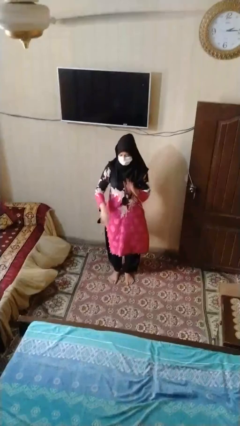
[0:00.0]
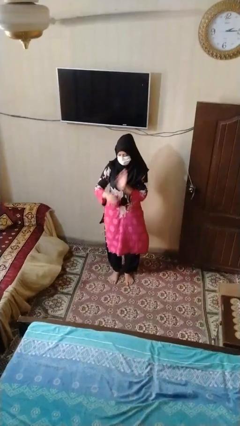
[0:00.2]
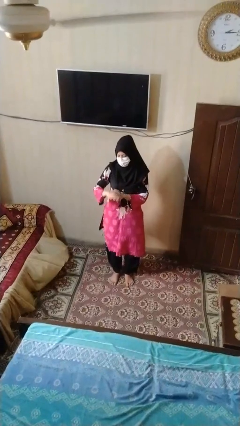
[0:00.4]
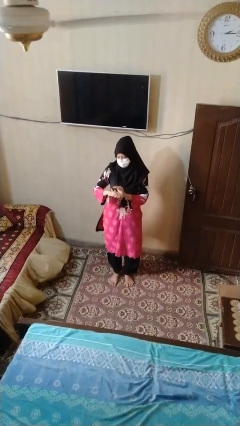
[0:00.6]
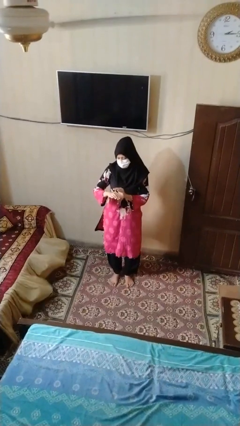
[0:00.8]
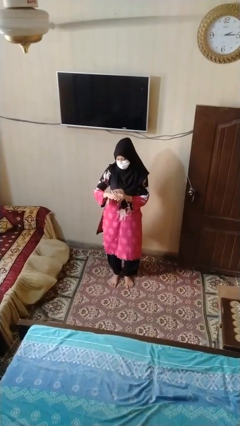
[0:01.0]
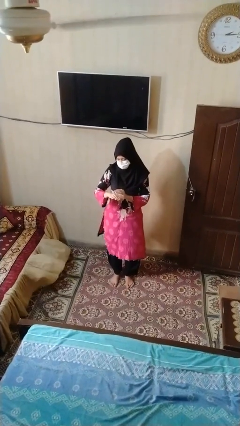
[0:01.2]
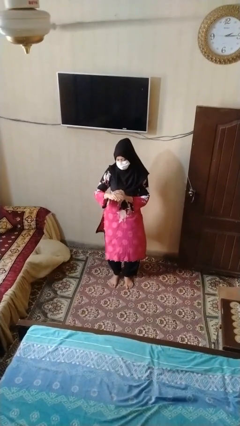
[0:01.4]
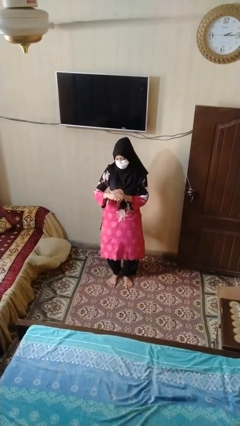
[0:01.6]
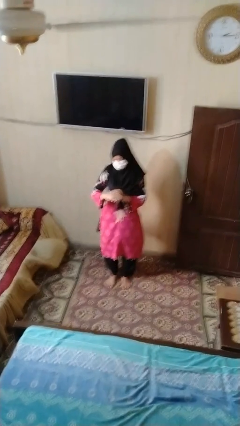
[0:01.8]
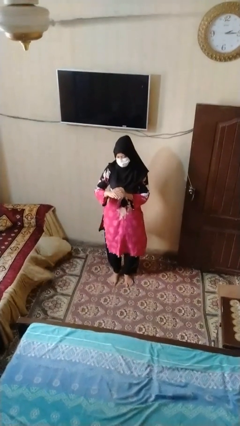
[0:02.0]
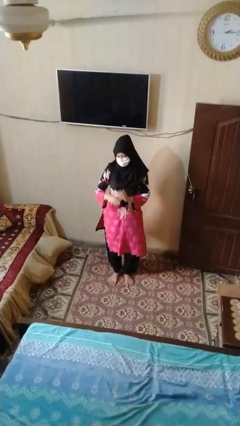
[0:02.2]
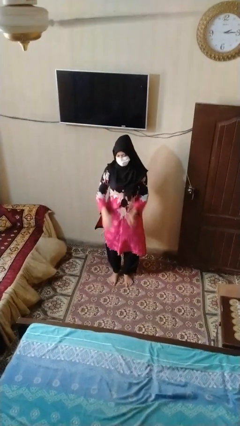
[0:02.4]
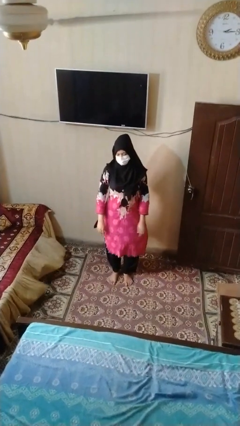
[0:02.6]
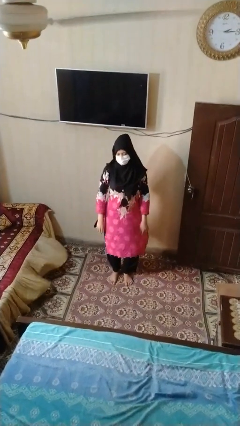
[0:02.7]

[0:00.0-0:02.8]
person searches jewelry box

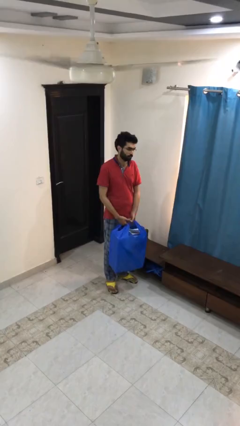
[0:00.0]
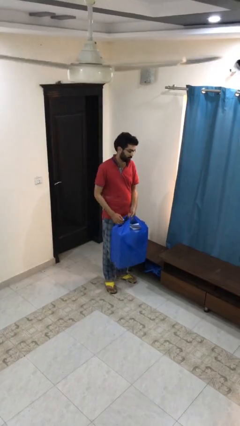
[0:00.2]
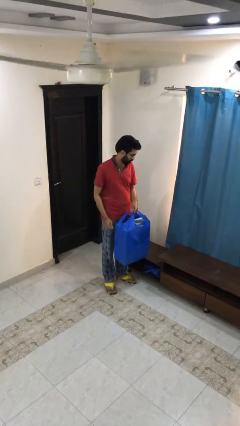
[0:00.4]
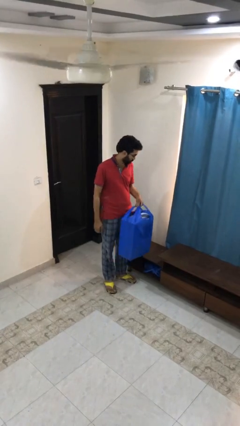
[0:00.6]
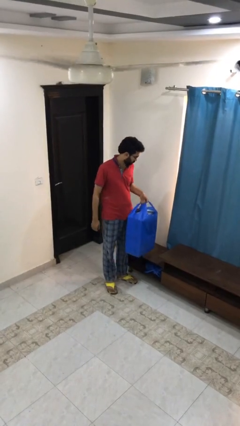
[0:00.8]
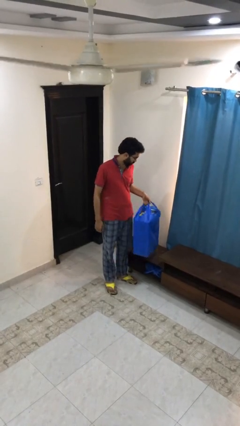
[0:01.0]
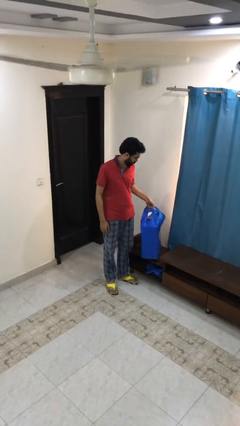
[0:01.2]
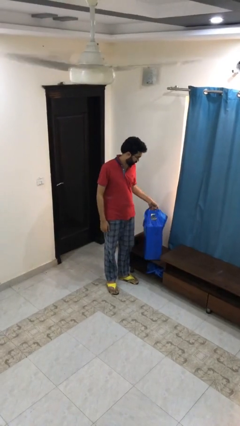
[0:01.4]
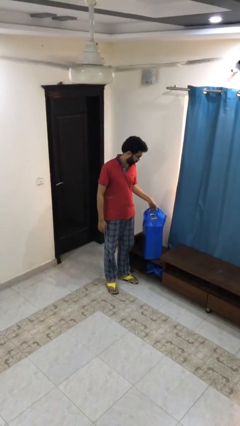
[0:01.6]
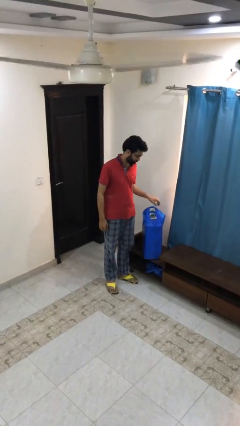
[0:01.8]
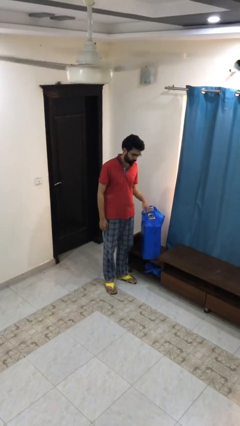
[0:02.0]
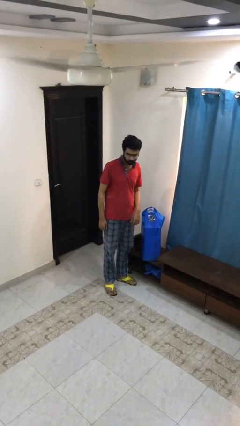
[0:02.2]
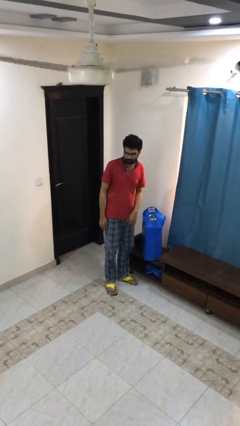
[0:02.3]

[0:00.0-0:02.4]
person puts down object on table

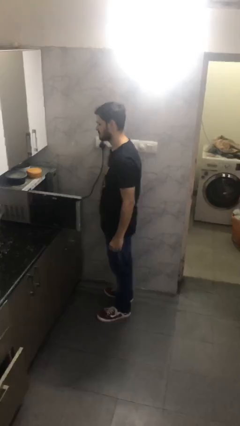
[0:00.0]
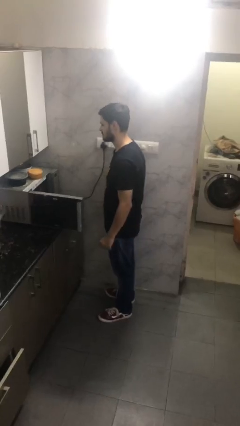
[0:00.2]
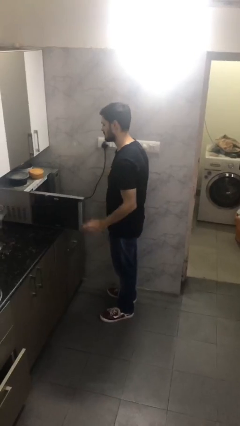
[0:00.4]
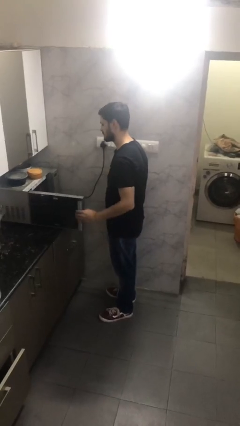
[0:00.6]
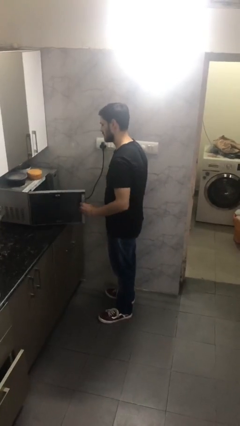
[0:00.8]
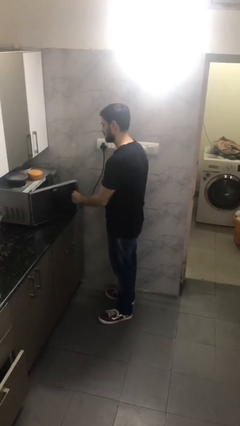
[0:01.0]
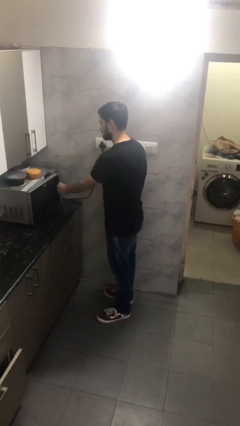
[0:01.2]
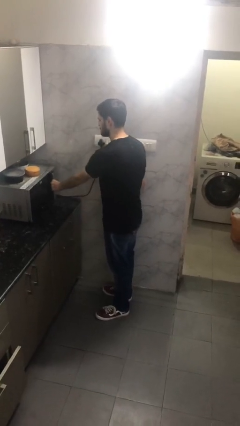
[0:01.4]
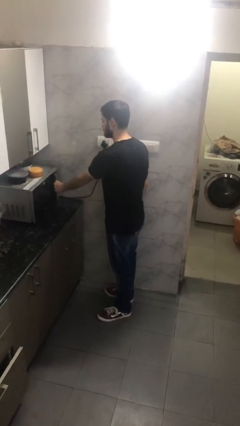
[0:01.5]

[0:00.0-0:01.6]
person closes microwave

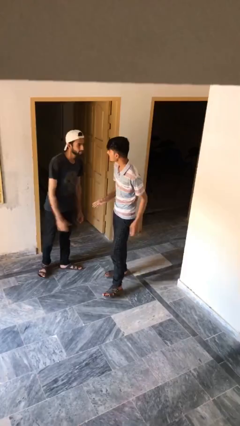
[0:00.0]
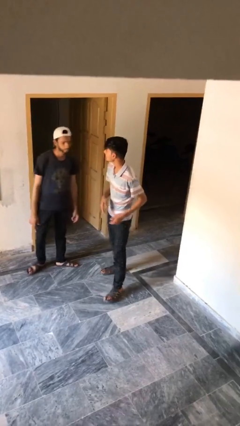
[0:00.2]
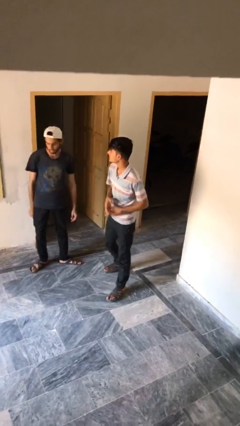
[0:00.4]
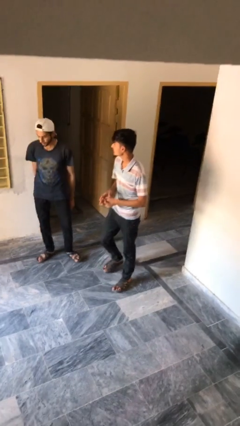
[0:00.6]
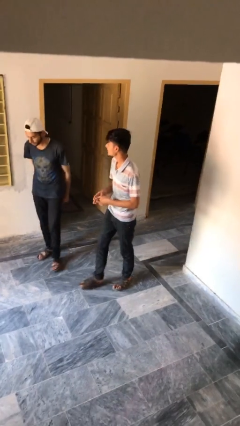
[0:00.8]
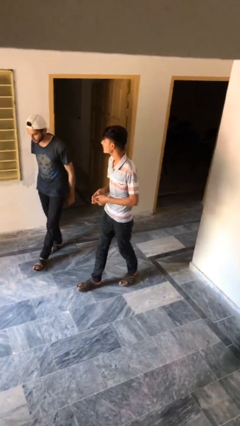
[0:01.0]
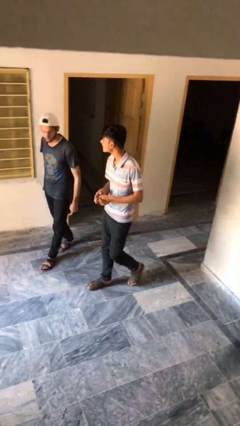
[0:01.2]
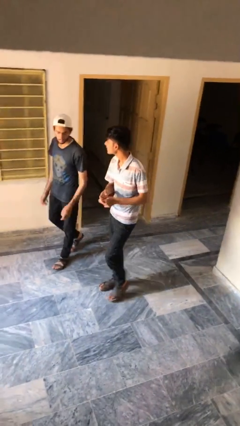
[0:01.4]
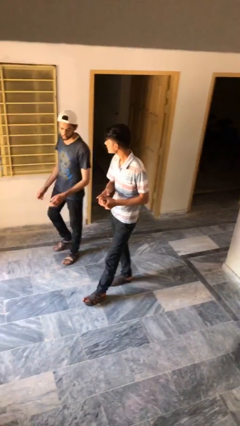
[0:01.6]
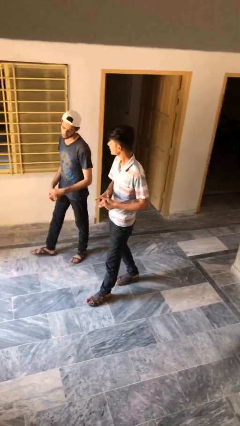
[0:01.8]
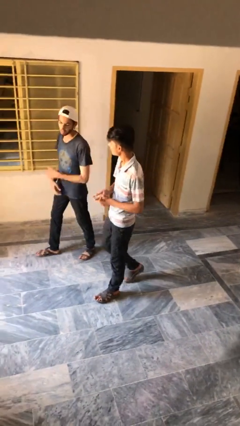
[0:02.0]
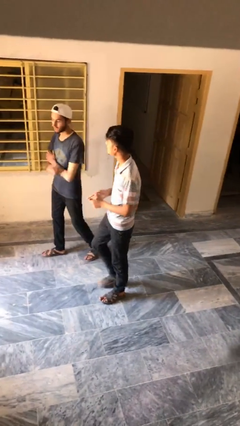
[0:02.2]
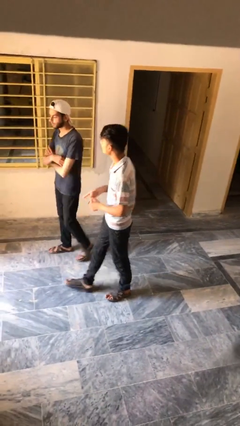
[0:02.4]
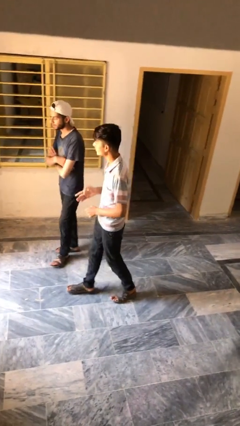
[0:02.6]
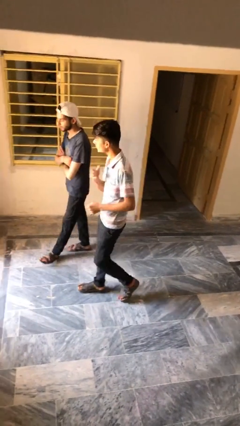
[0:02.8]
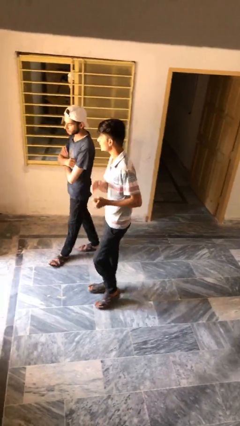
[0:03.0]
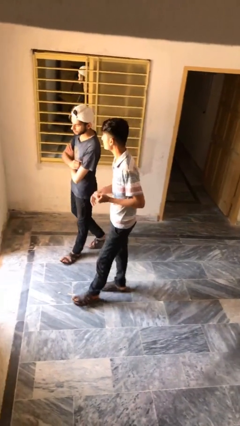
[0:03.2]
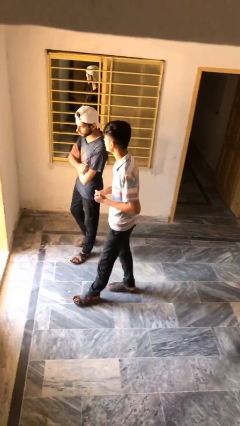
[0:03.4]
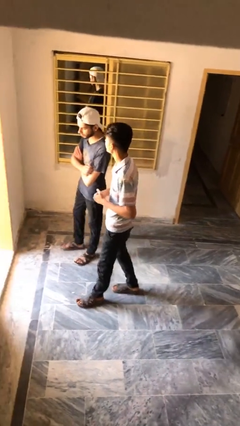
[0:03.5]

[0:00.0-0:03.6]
person talks to person

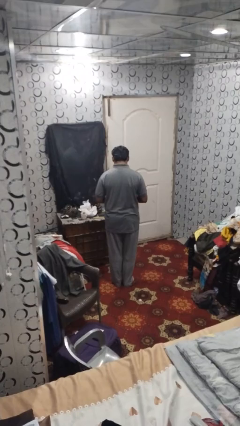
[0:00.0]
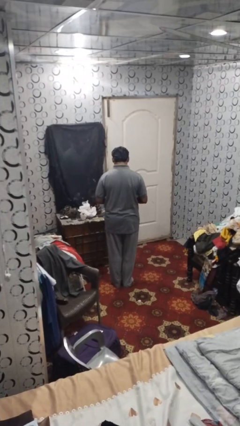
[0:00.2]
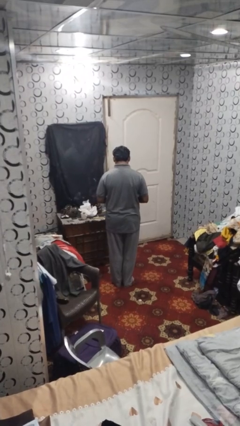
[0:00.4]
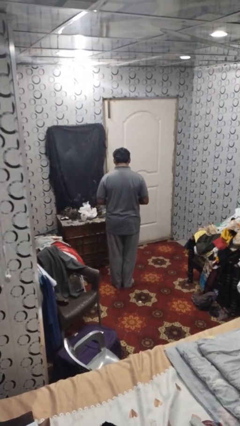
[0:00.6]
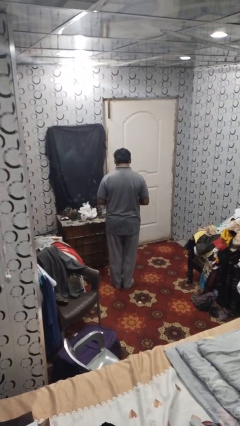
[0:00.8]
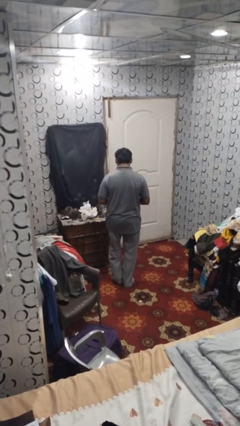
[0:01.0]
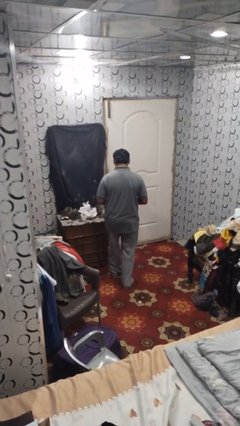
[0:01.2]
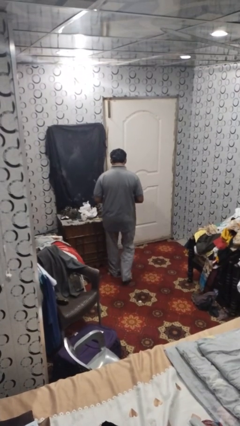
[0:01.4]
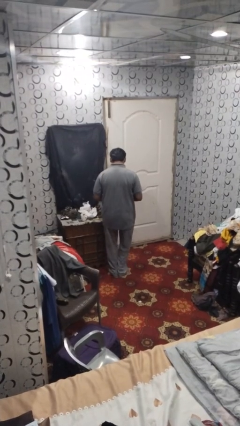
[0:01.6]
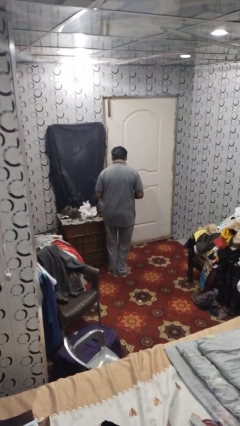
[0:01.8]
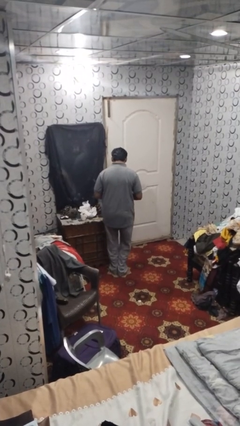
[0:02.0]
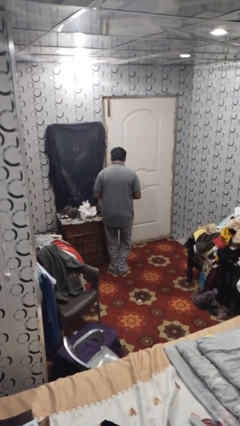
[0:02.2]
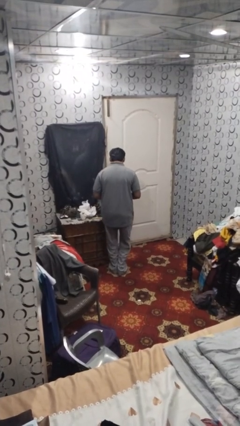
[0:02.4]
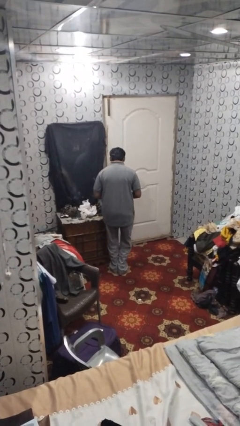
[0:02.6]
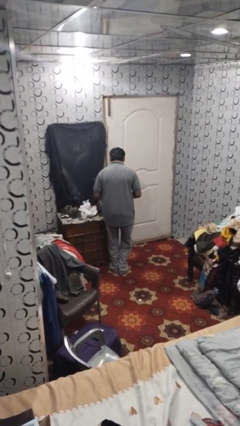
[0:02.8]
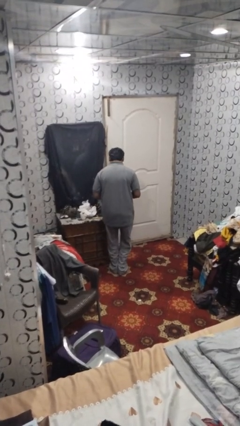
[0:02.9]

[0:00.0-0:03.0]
person bumps into table

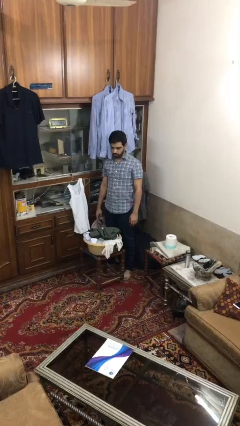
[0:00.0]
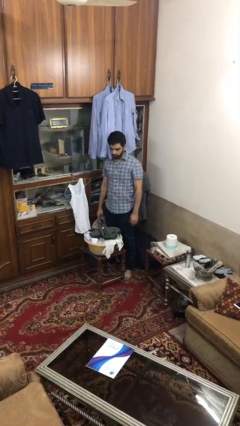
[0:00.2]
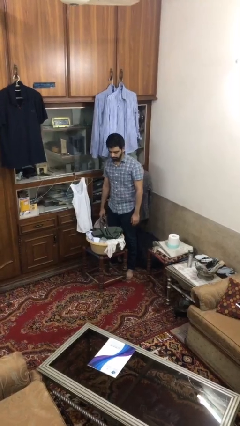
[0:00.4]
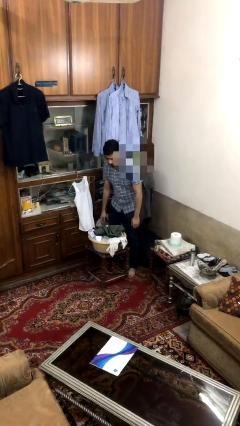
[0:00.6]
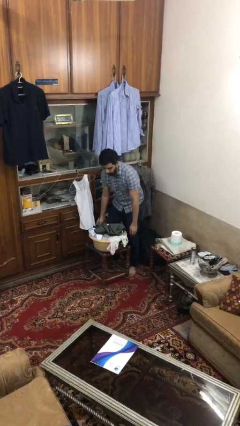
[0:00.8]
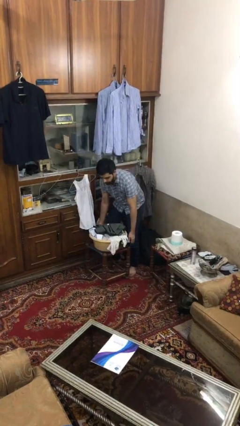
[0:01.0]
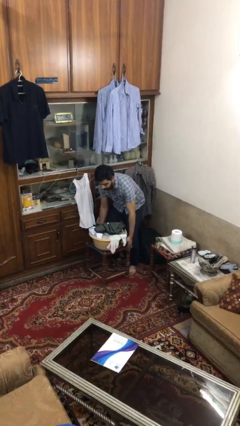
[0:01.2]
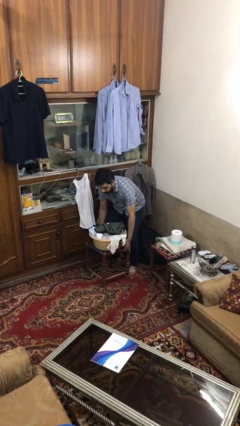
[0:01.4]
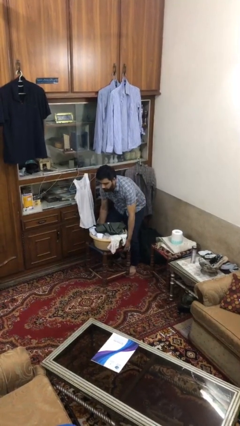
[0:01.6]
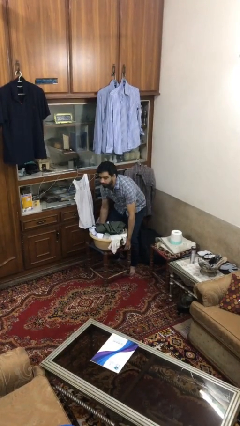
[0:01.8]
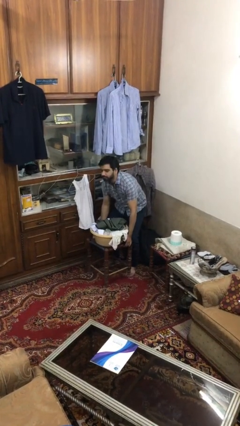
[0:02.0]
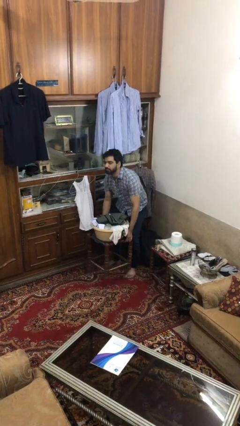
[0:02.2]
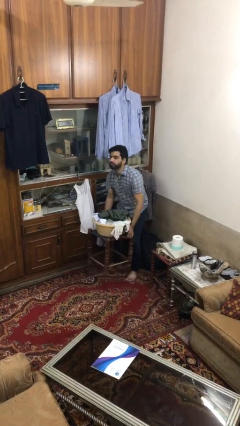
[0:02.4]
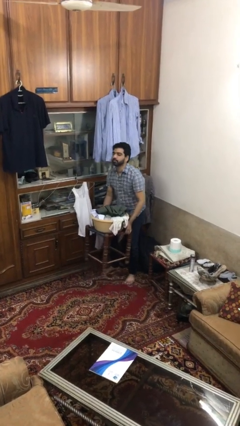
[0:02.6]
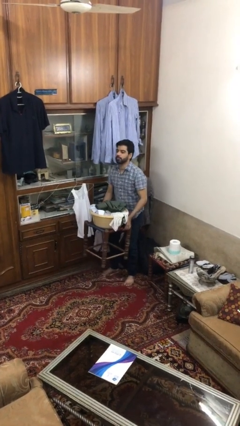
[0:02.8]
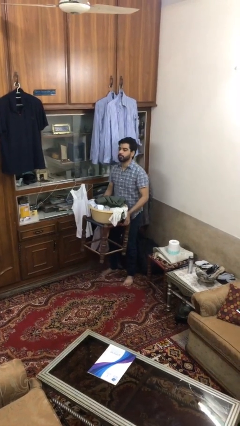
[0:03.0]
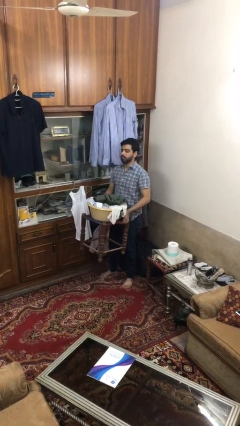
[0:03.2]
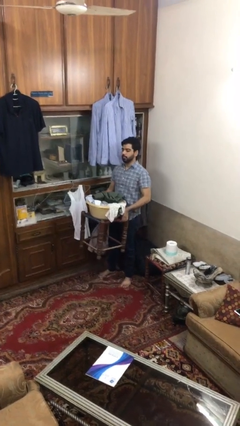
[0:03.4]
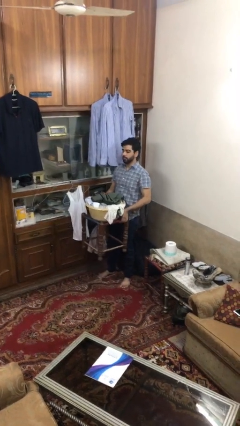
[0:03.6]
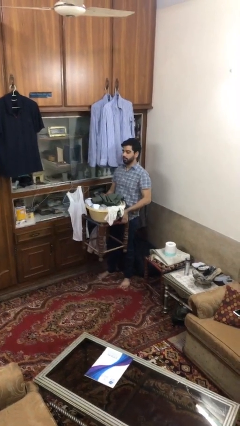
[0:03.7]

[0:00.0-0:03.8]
person picks up object from floor
